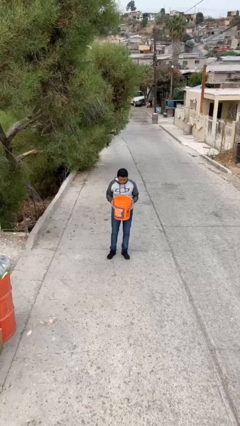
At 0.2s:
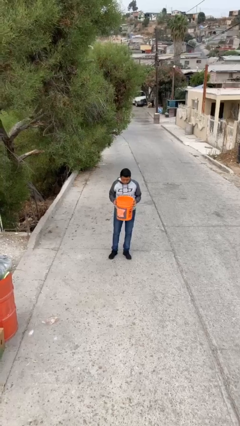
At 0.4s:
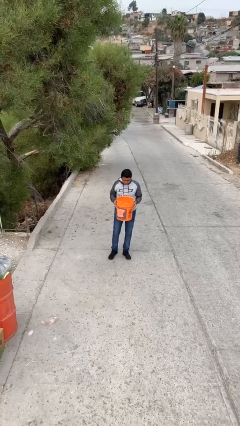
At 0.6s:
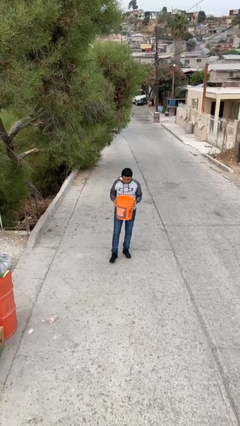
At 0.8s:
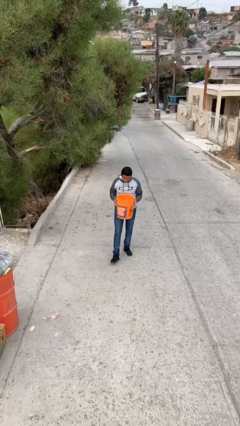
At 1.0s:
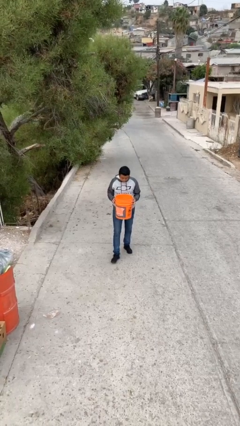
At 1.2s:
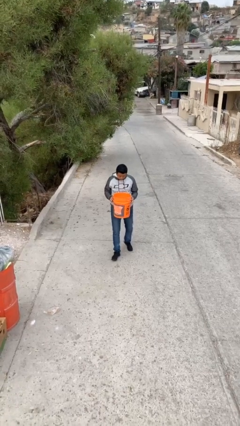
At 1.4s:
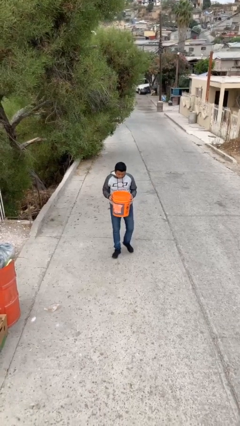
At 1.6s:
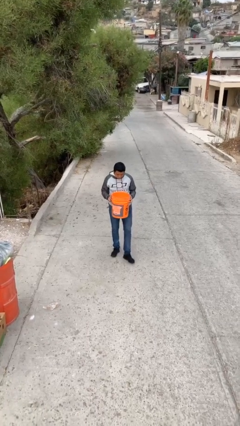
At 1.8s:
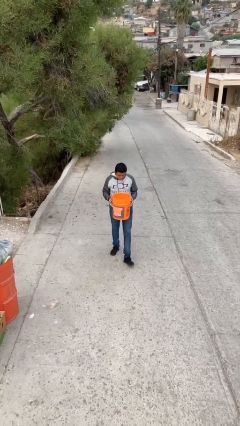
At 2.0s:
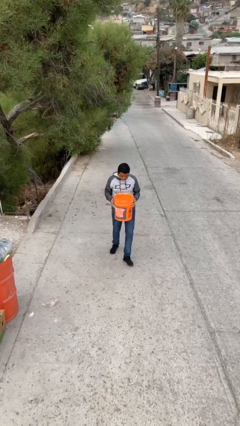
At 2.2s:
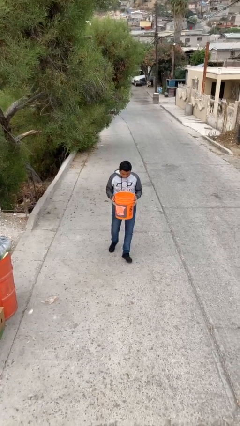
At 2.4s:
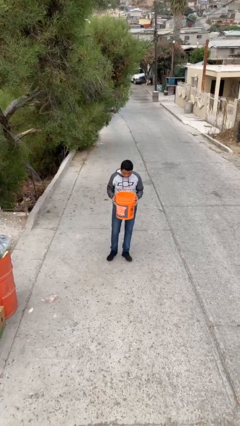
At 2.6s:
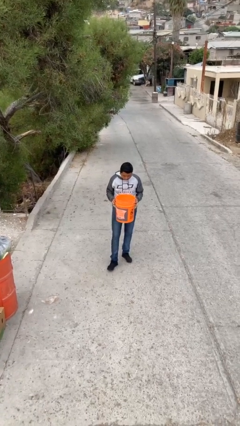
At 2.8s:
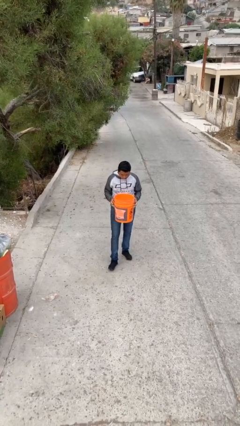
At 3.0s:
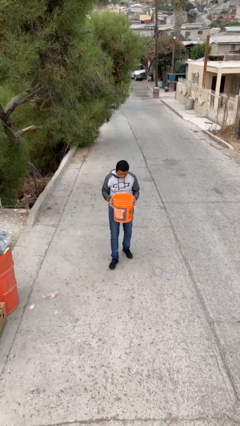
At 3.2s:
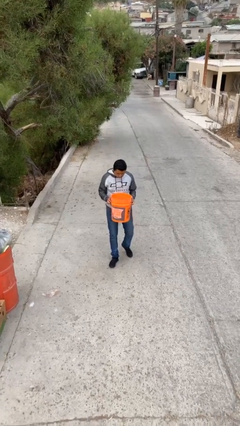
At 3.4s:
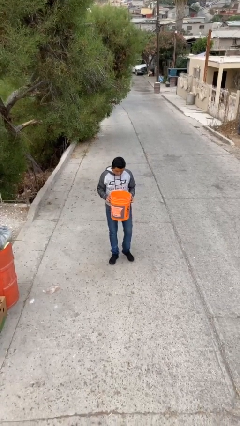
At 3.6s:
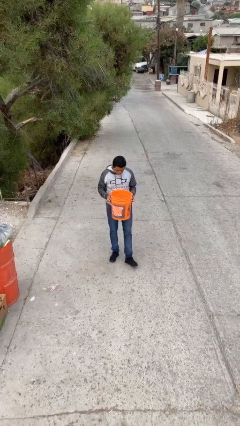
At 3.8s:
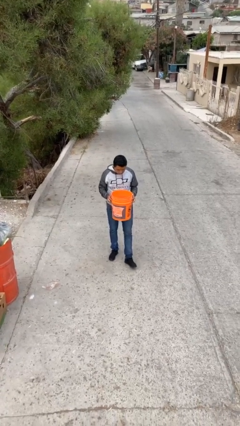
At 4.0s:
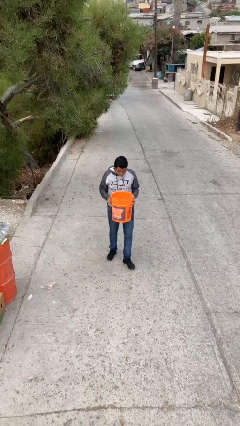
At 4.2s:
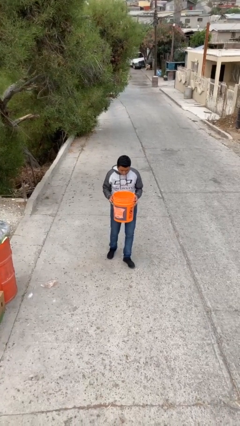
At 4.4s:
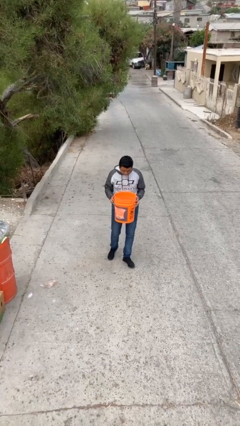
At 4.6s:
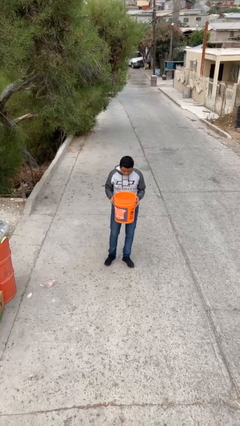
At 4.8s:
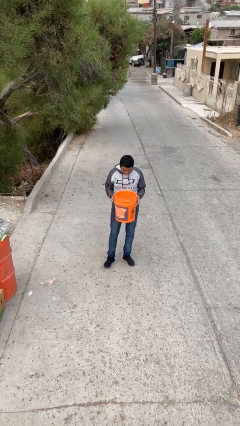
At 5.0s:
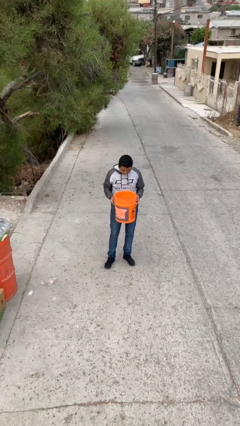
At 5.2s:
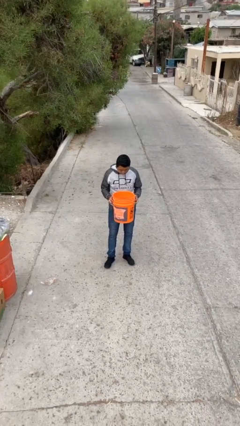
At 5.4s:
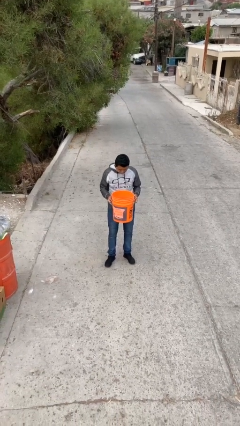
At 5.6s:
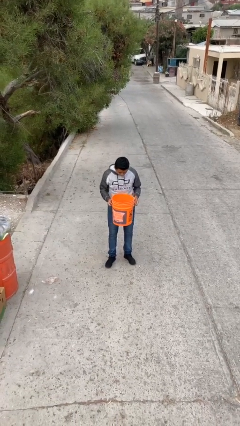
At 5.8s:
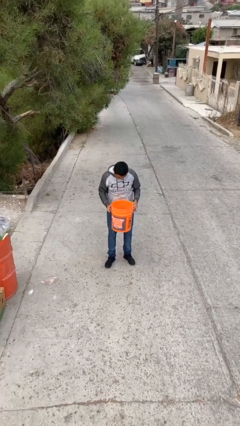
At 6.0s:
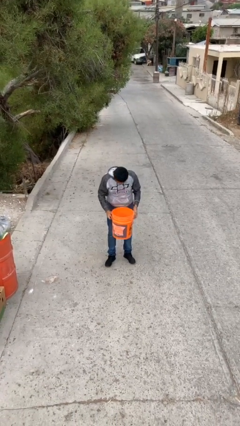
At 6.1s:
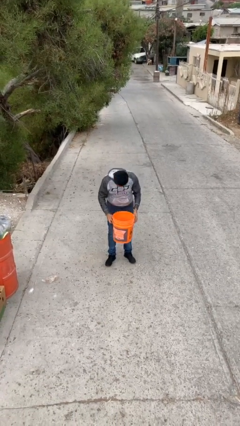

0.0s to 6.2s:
person carries heavy object

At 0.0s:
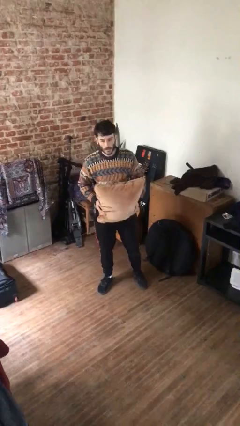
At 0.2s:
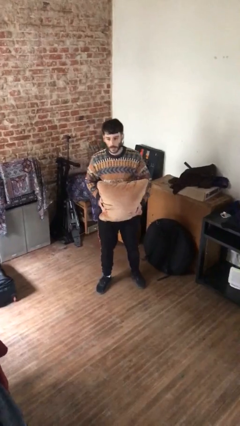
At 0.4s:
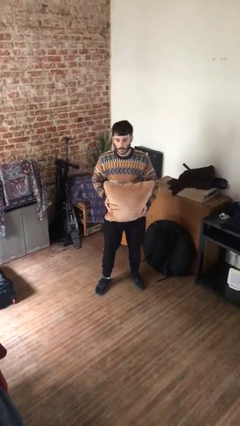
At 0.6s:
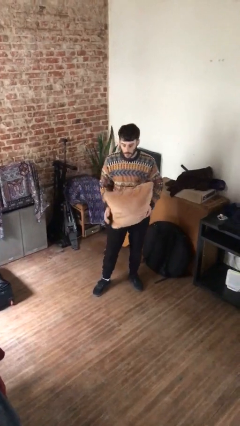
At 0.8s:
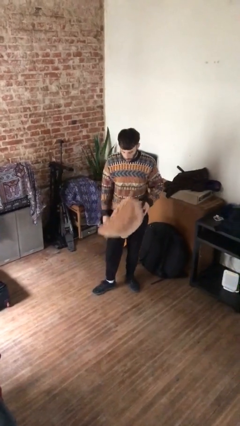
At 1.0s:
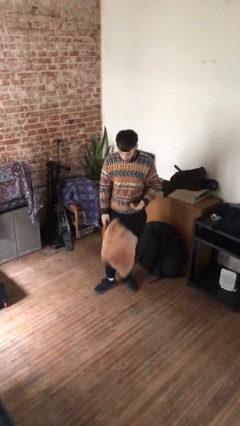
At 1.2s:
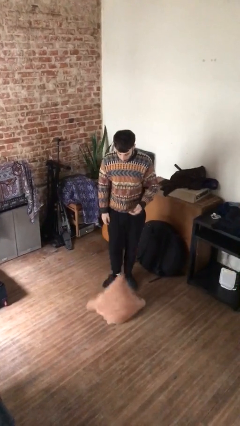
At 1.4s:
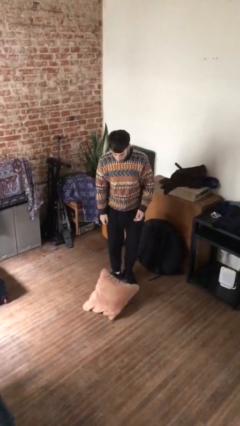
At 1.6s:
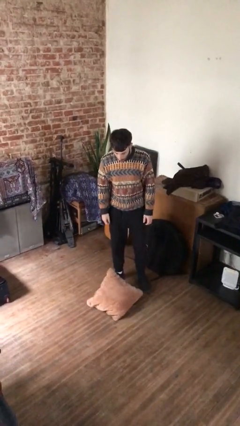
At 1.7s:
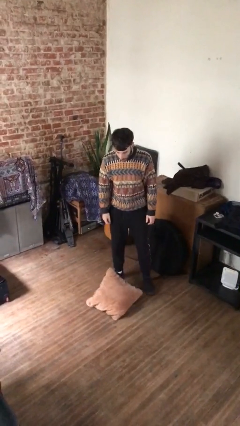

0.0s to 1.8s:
person drops object

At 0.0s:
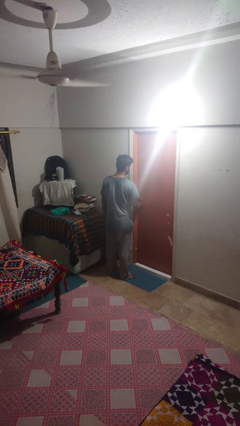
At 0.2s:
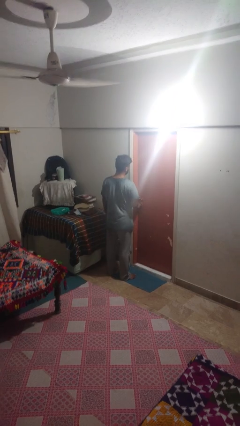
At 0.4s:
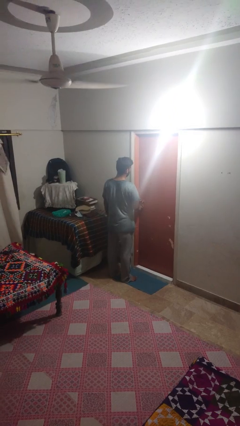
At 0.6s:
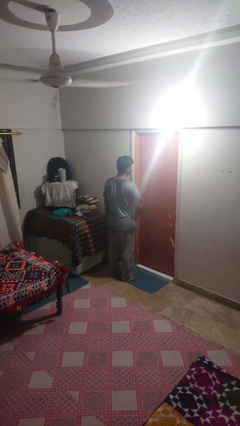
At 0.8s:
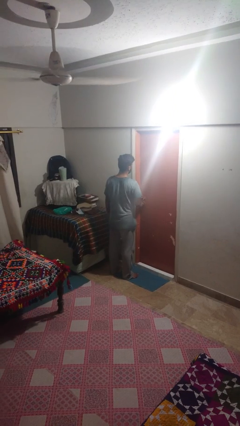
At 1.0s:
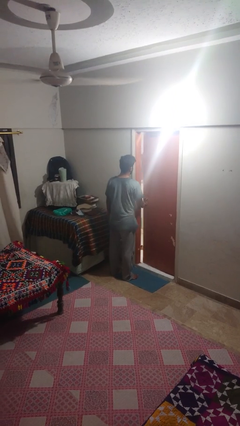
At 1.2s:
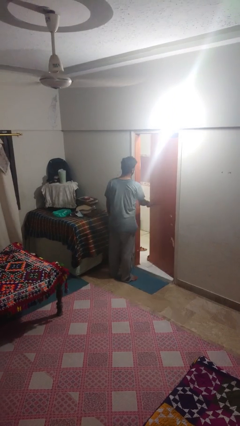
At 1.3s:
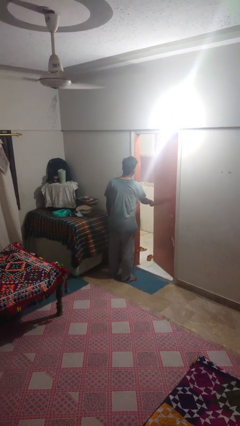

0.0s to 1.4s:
person opens facility door

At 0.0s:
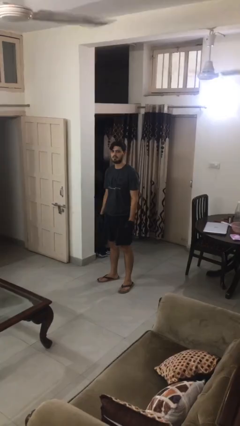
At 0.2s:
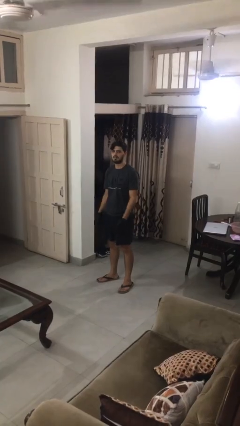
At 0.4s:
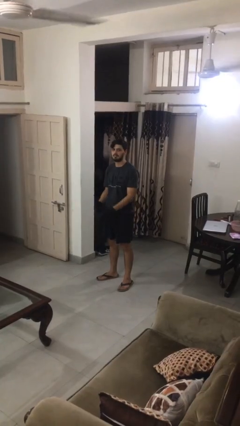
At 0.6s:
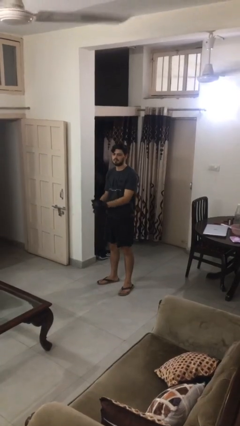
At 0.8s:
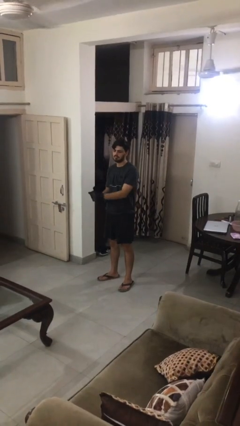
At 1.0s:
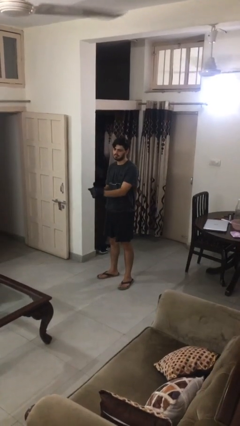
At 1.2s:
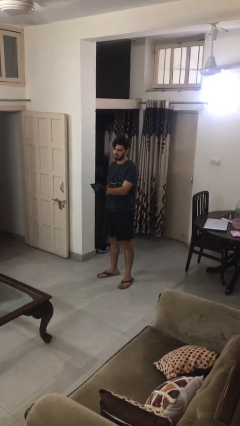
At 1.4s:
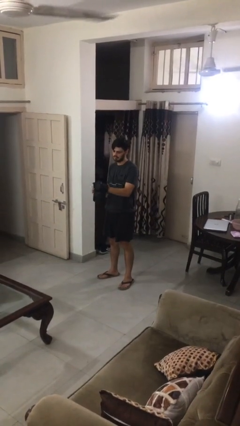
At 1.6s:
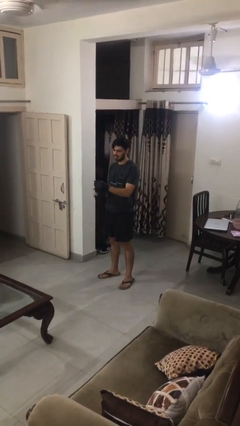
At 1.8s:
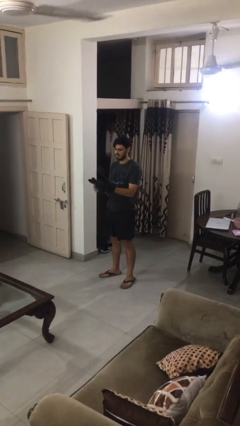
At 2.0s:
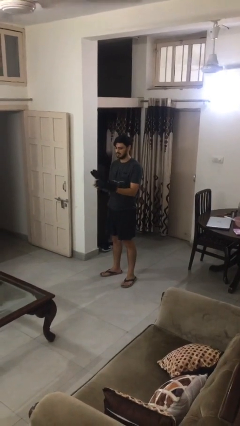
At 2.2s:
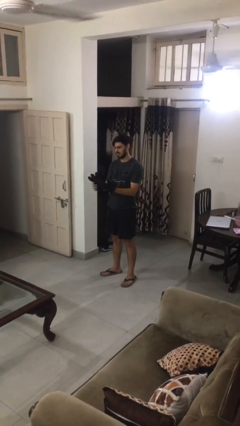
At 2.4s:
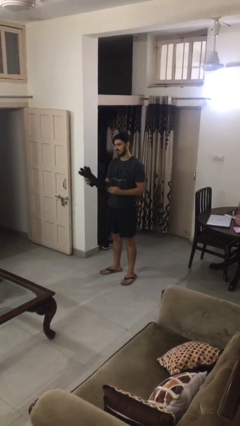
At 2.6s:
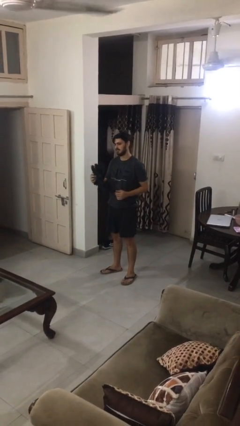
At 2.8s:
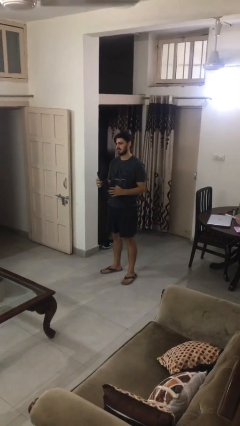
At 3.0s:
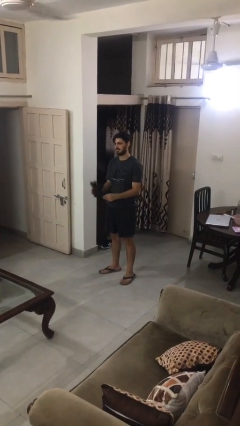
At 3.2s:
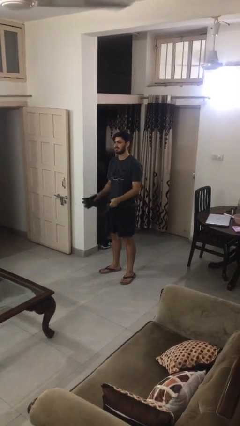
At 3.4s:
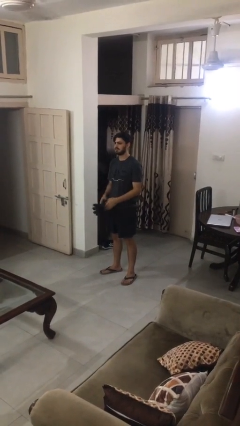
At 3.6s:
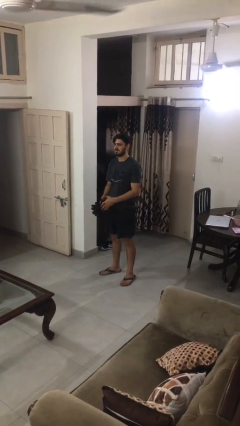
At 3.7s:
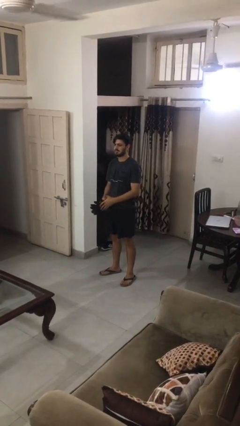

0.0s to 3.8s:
person takes off gloves

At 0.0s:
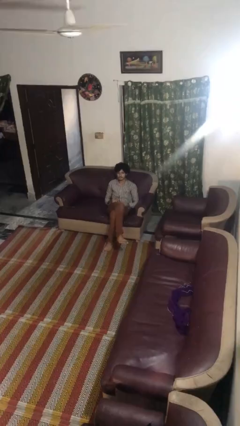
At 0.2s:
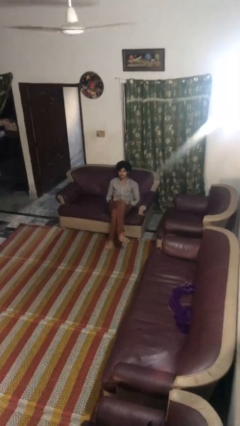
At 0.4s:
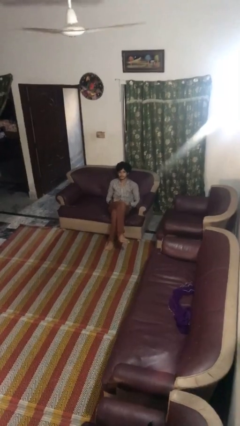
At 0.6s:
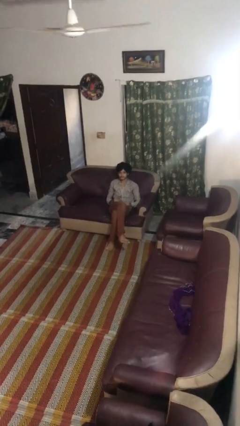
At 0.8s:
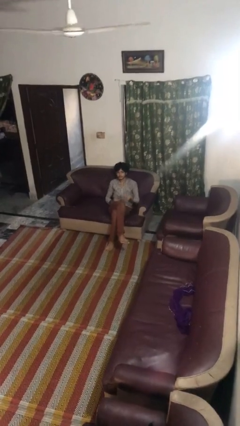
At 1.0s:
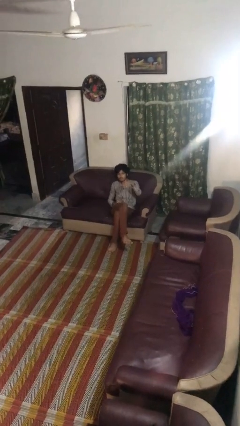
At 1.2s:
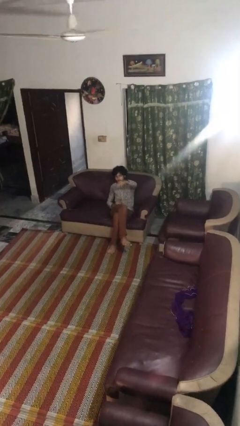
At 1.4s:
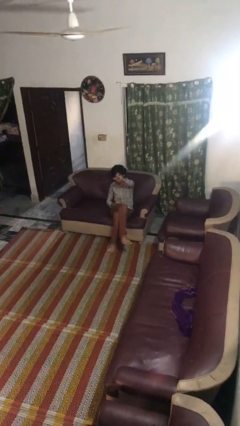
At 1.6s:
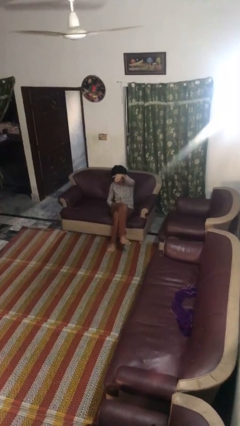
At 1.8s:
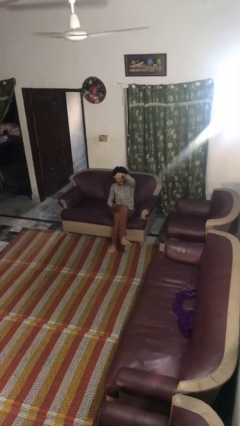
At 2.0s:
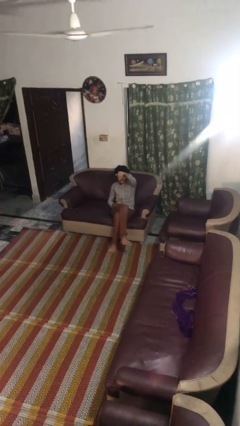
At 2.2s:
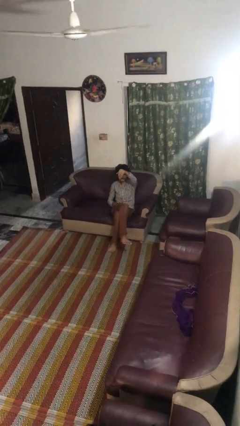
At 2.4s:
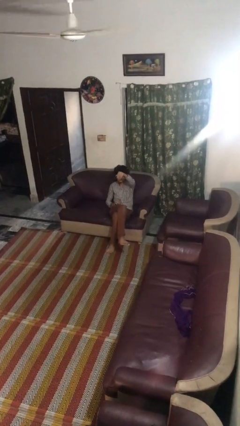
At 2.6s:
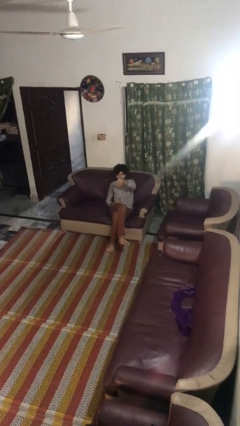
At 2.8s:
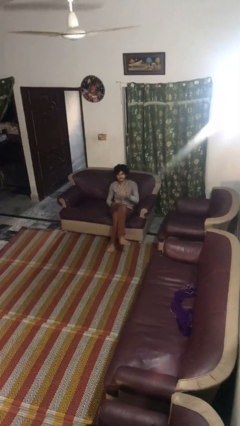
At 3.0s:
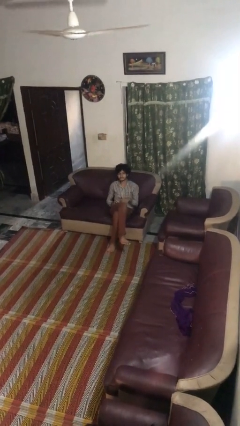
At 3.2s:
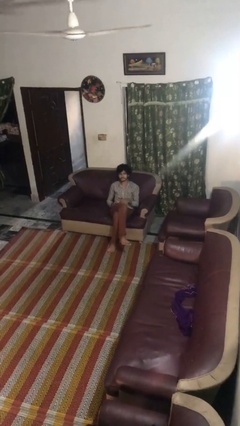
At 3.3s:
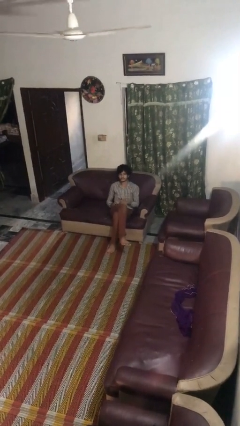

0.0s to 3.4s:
person gestures come here

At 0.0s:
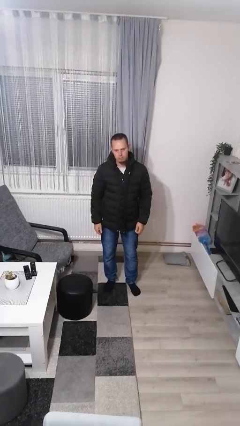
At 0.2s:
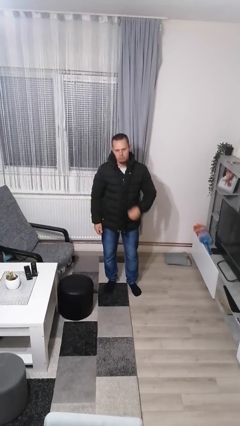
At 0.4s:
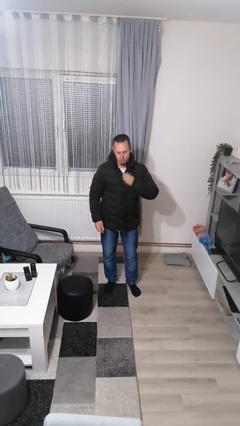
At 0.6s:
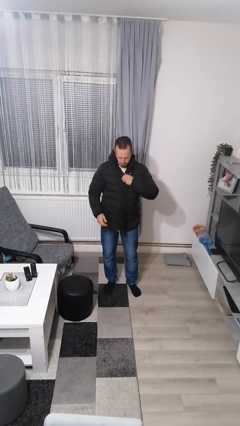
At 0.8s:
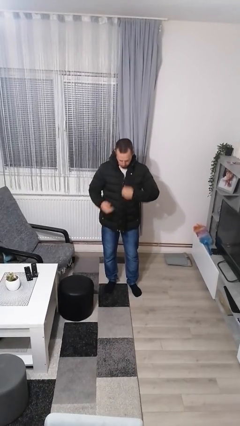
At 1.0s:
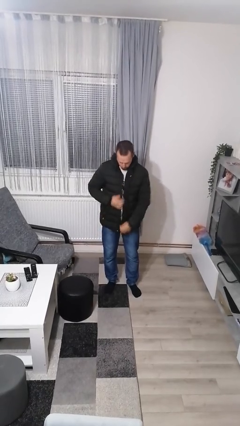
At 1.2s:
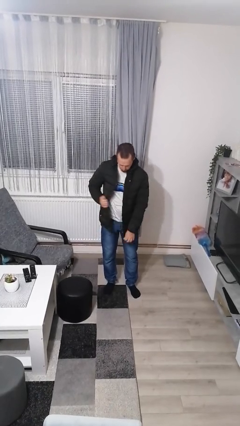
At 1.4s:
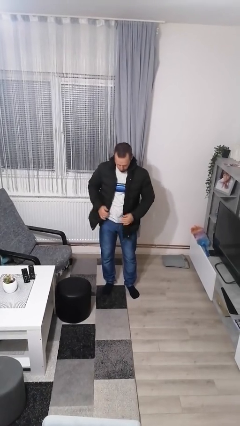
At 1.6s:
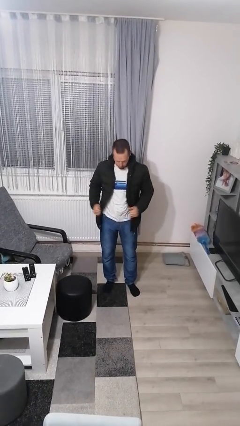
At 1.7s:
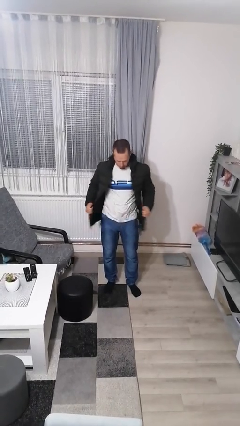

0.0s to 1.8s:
person unzips jacket
